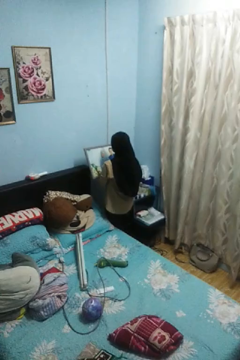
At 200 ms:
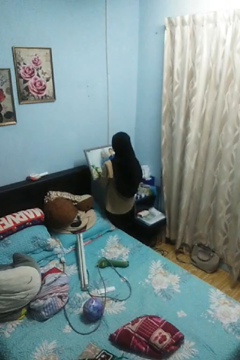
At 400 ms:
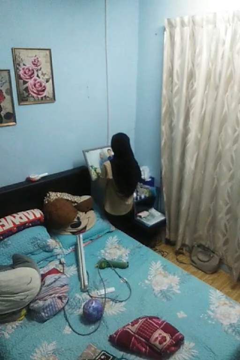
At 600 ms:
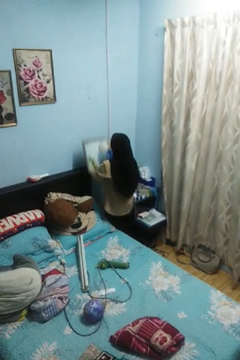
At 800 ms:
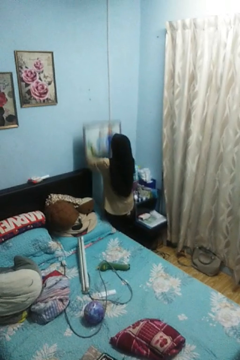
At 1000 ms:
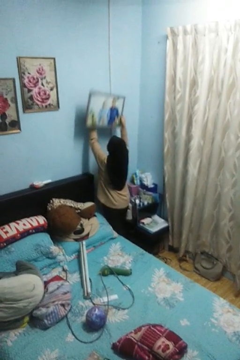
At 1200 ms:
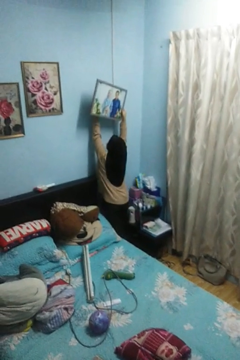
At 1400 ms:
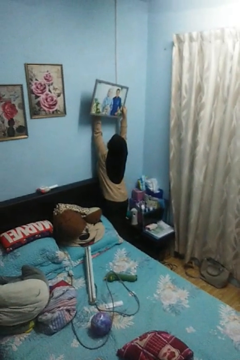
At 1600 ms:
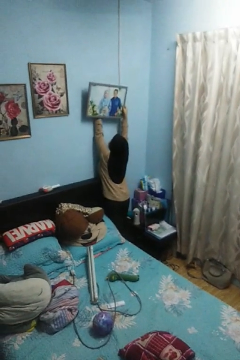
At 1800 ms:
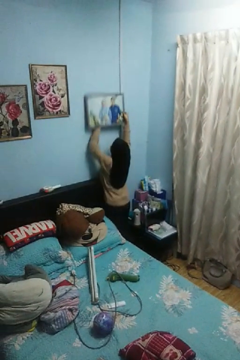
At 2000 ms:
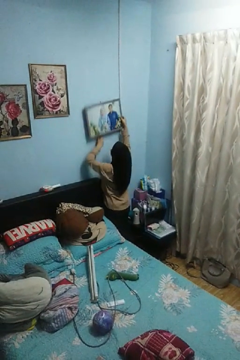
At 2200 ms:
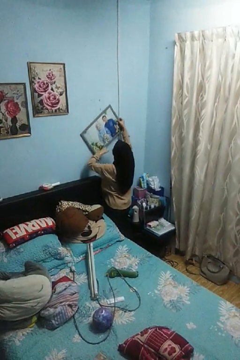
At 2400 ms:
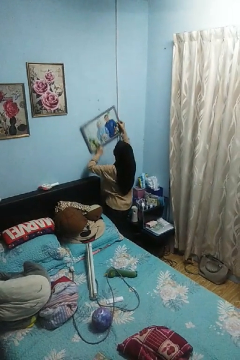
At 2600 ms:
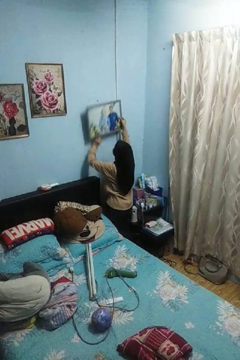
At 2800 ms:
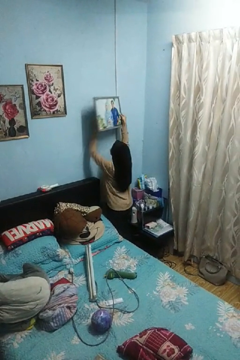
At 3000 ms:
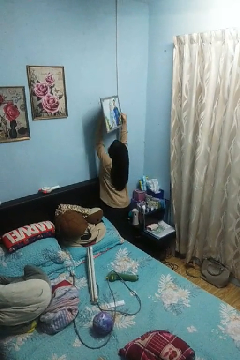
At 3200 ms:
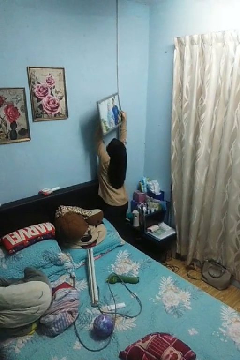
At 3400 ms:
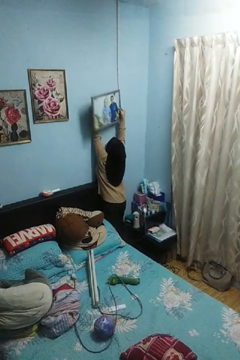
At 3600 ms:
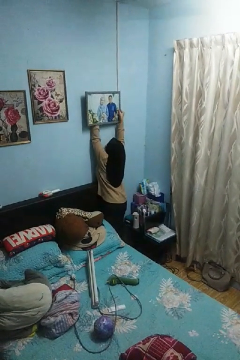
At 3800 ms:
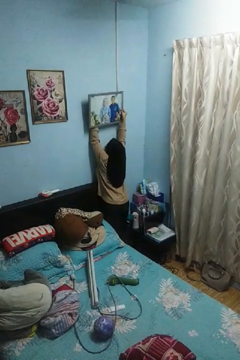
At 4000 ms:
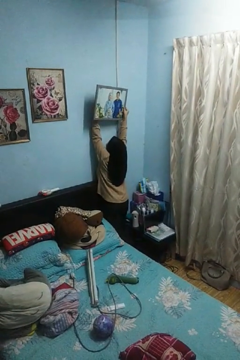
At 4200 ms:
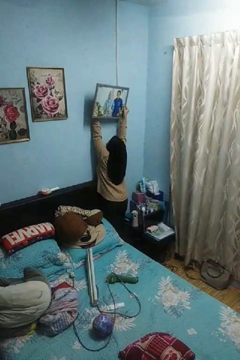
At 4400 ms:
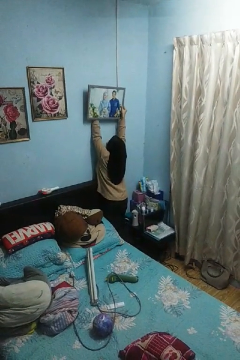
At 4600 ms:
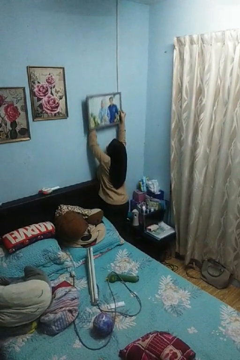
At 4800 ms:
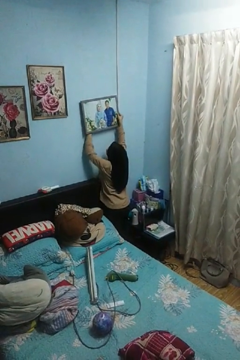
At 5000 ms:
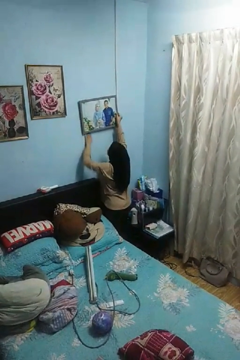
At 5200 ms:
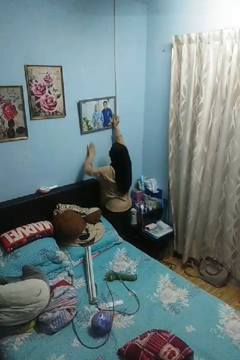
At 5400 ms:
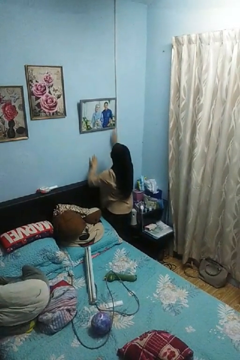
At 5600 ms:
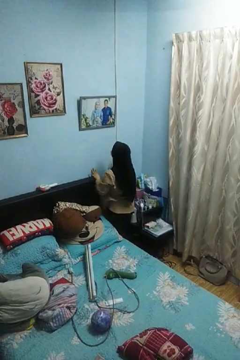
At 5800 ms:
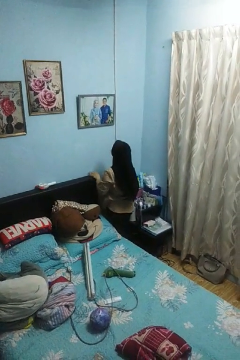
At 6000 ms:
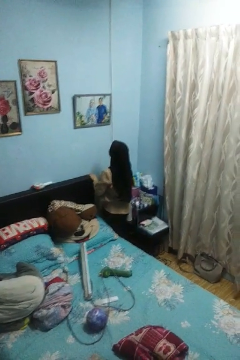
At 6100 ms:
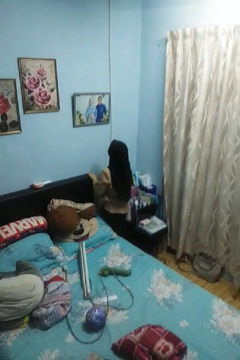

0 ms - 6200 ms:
person puts up picture frame

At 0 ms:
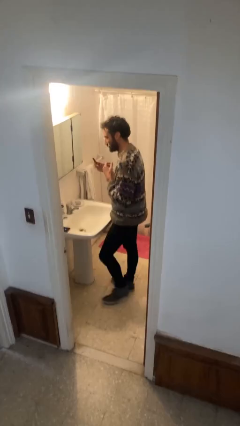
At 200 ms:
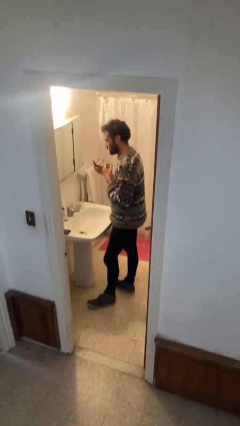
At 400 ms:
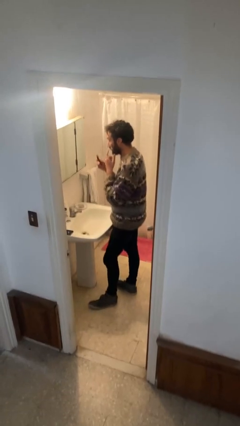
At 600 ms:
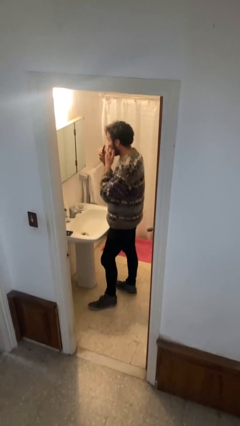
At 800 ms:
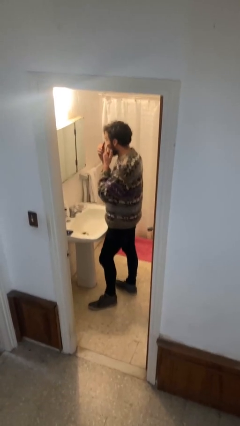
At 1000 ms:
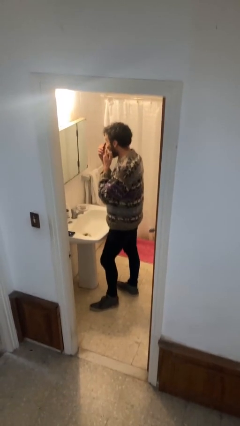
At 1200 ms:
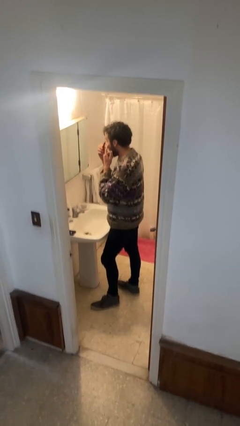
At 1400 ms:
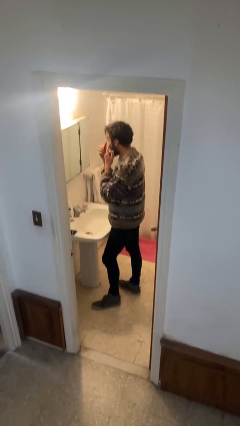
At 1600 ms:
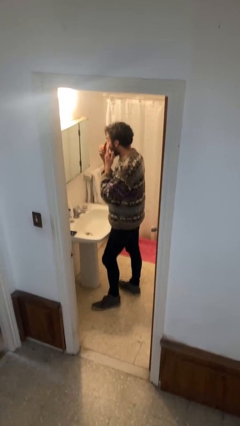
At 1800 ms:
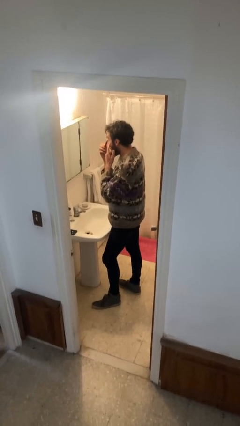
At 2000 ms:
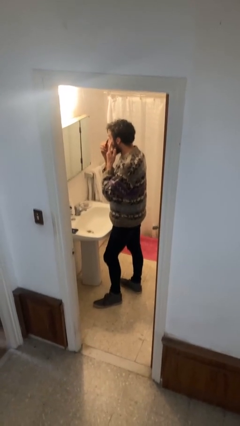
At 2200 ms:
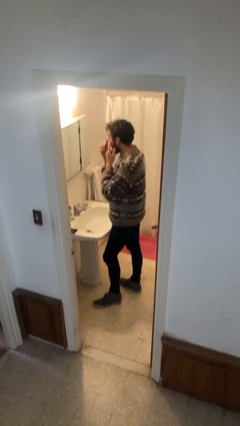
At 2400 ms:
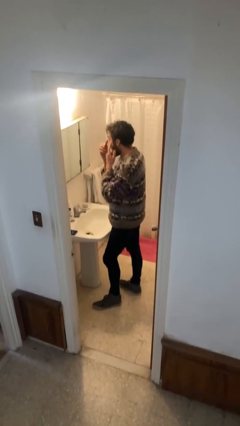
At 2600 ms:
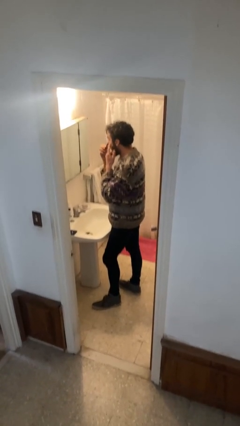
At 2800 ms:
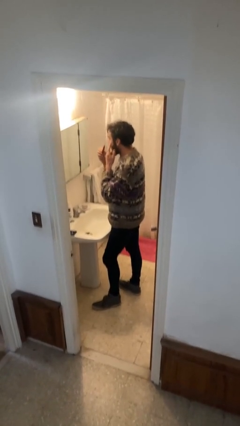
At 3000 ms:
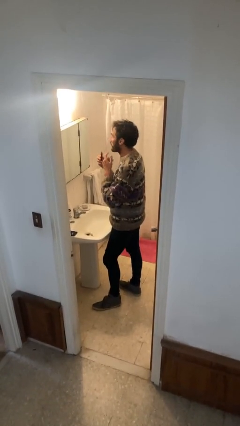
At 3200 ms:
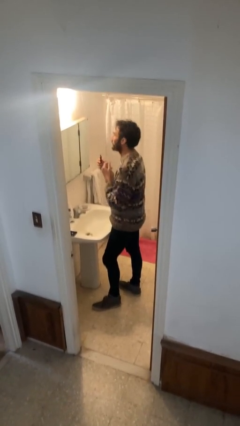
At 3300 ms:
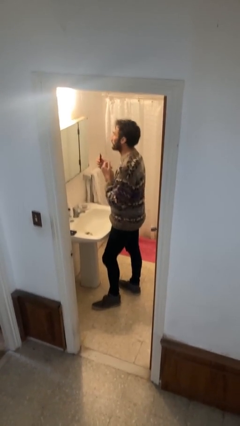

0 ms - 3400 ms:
person applies eye makeup

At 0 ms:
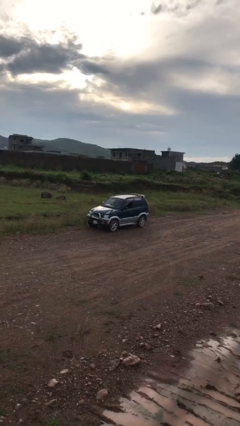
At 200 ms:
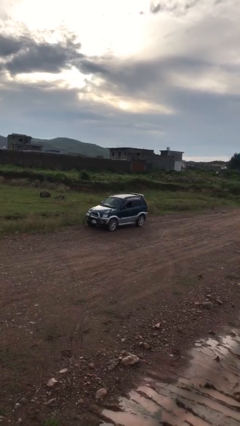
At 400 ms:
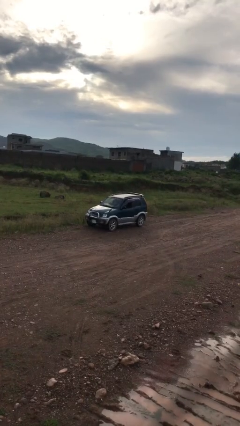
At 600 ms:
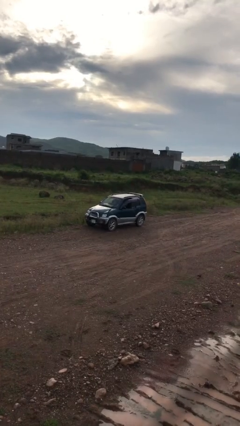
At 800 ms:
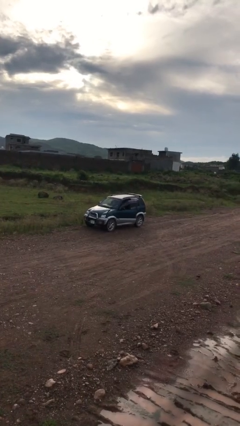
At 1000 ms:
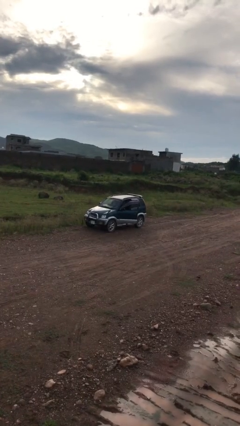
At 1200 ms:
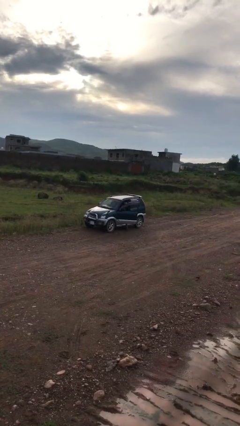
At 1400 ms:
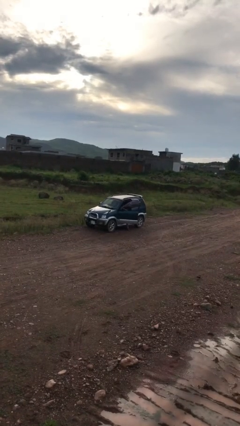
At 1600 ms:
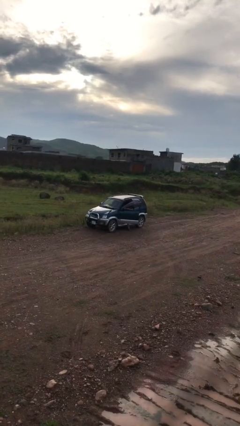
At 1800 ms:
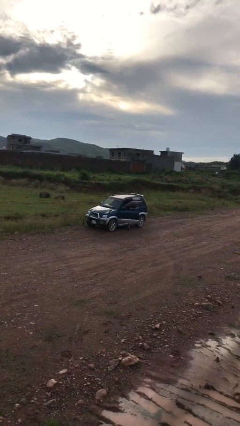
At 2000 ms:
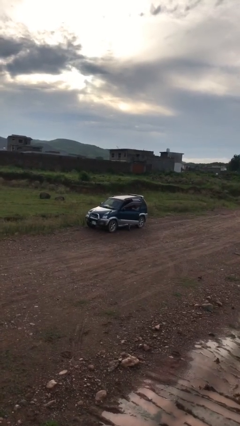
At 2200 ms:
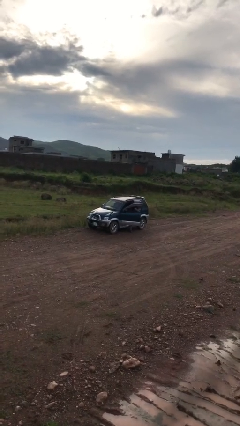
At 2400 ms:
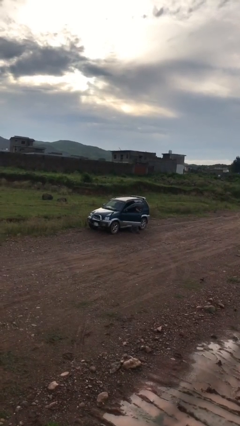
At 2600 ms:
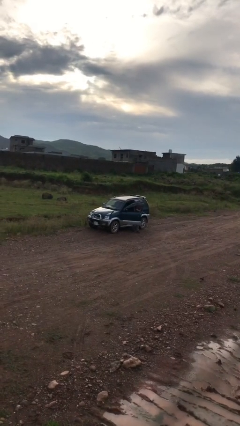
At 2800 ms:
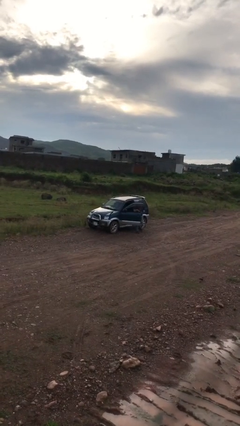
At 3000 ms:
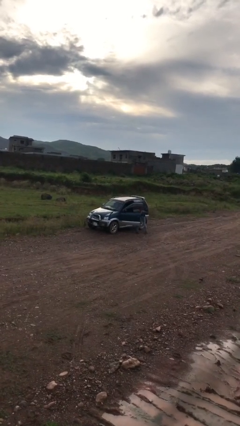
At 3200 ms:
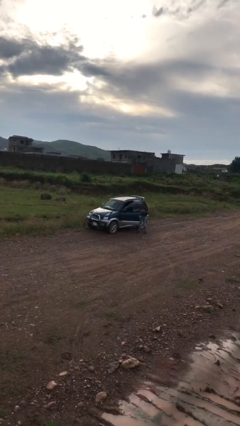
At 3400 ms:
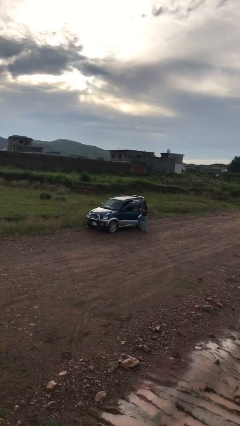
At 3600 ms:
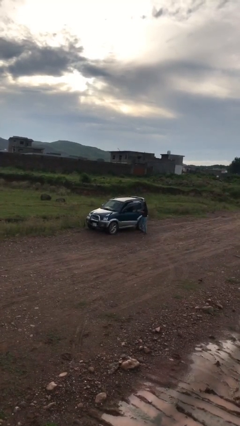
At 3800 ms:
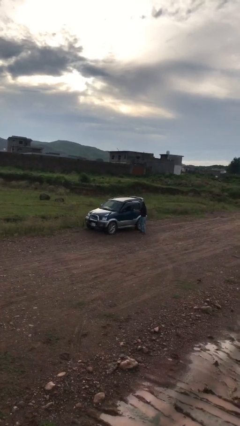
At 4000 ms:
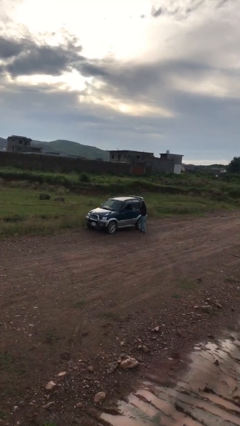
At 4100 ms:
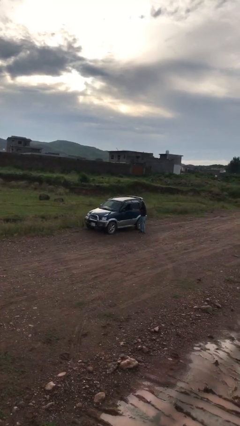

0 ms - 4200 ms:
car drops off person

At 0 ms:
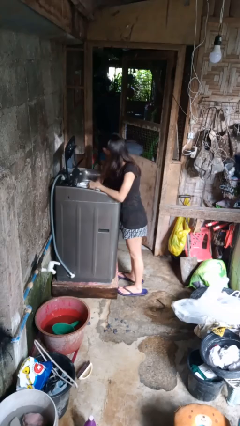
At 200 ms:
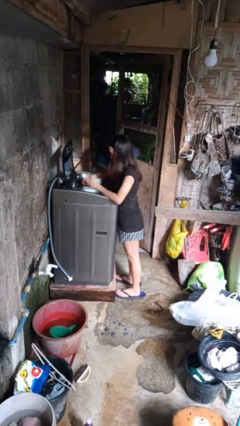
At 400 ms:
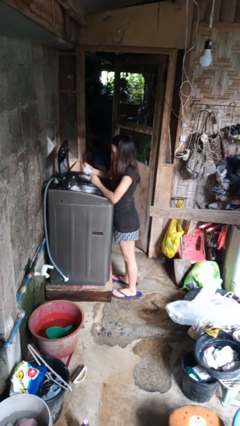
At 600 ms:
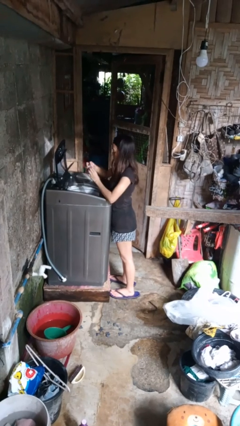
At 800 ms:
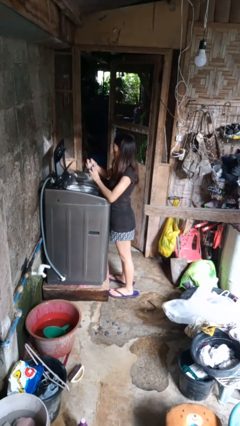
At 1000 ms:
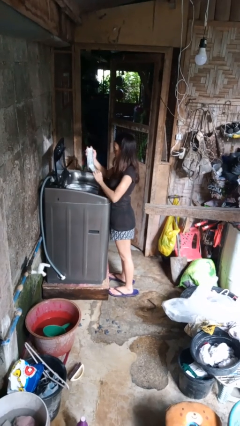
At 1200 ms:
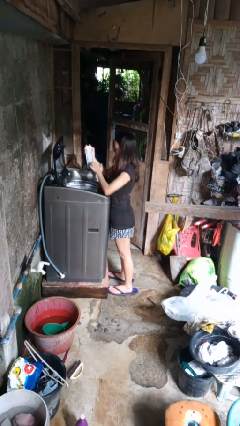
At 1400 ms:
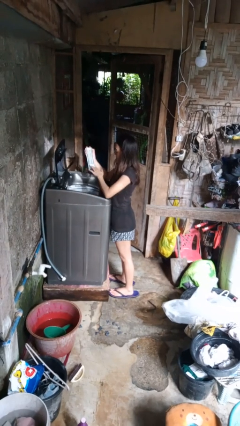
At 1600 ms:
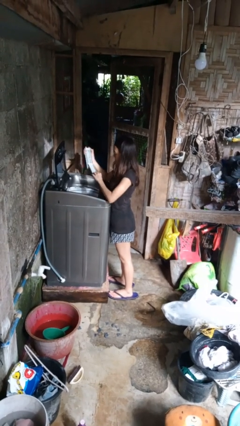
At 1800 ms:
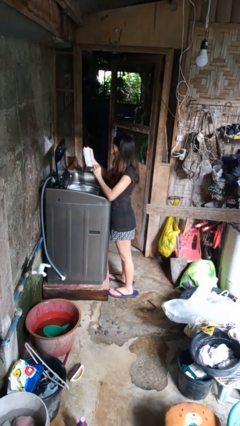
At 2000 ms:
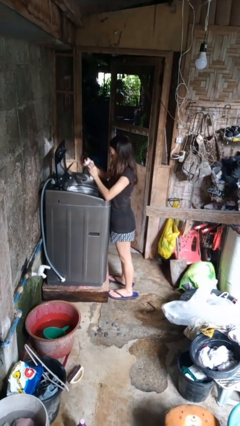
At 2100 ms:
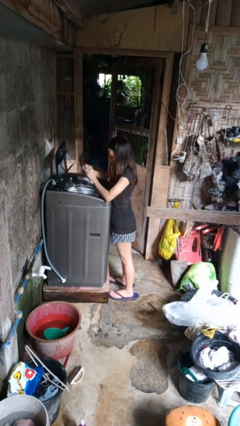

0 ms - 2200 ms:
person cleans dryer lint trap

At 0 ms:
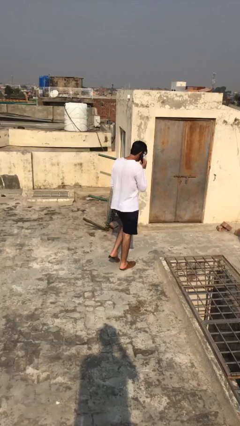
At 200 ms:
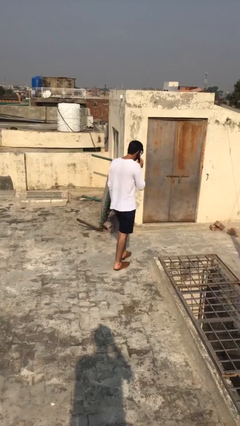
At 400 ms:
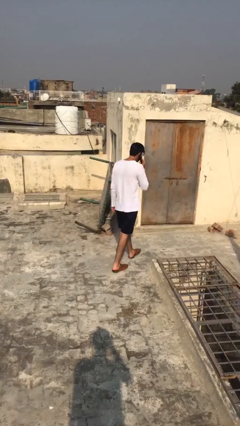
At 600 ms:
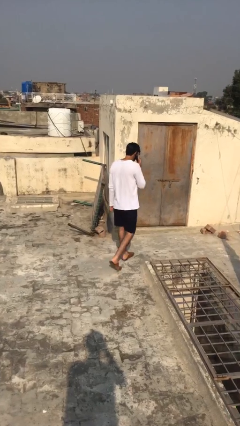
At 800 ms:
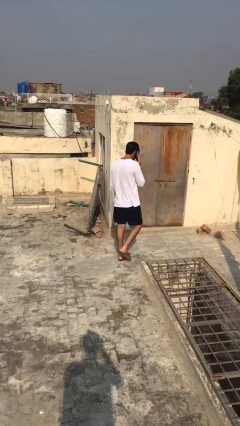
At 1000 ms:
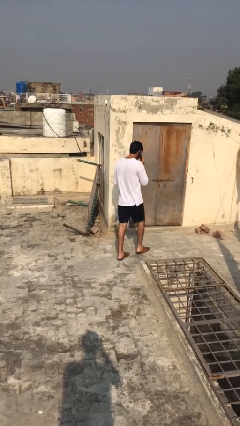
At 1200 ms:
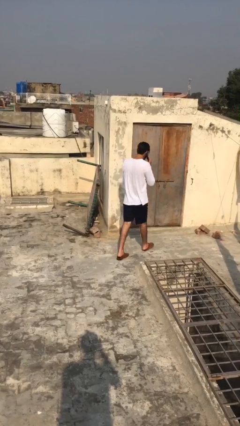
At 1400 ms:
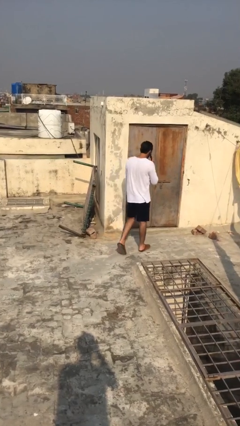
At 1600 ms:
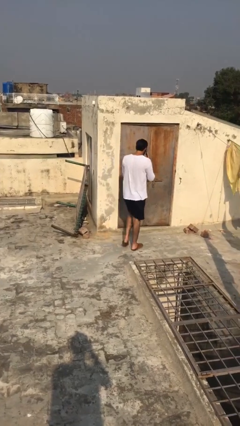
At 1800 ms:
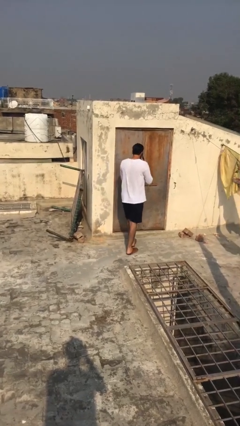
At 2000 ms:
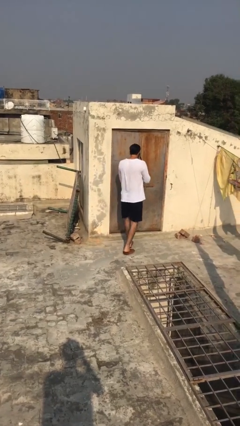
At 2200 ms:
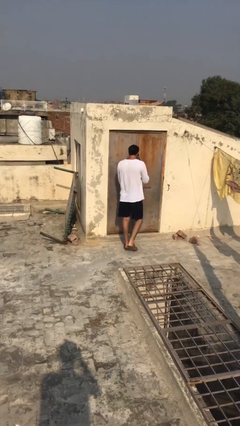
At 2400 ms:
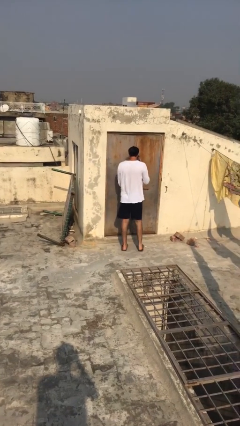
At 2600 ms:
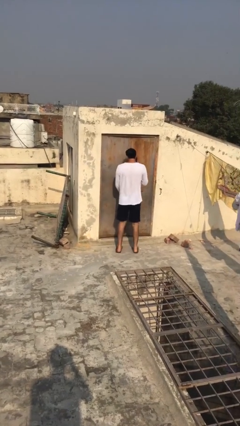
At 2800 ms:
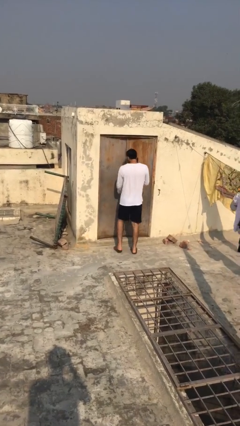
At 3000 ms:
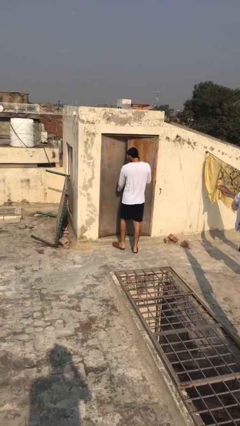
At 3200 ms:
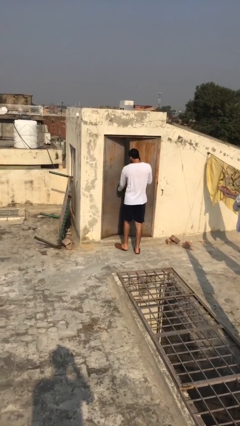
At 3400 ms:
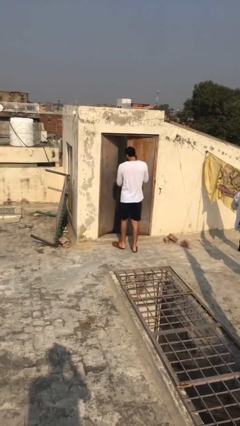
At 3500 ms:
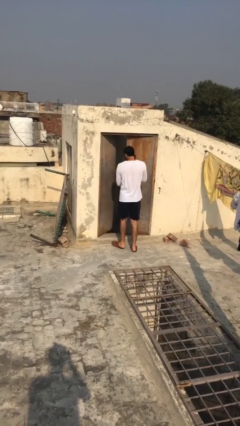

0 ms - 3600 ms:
person opens facility door
